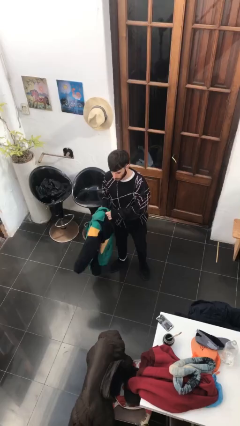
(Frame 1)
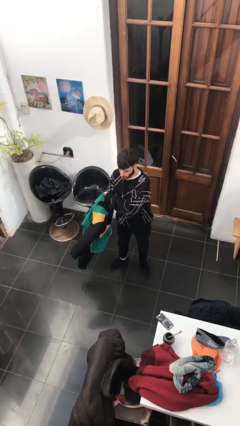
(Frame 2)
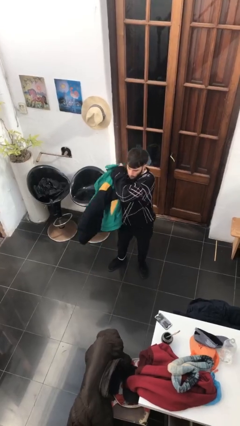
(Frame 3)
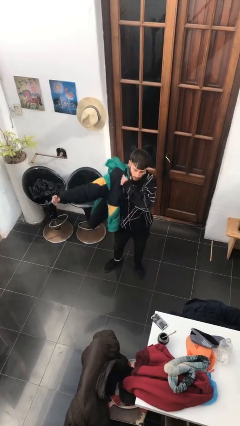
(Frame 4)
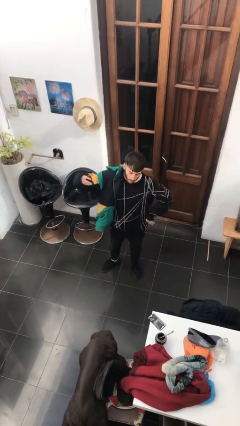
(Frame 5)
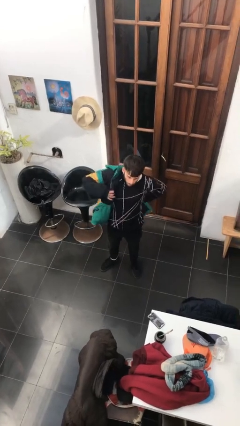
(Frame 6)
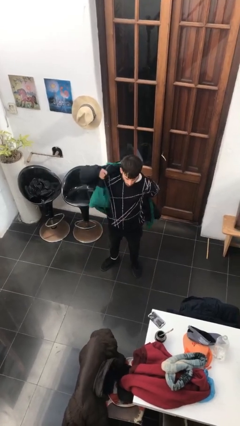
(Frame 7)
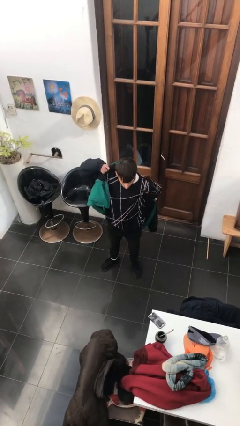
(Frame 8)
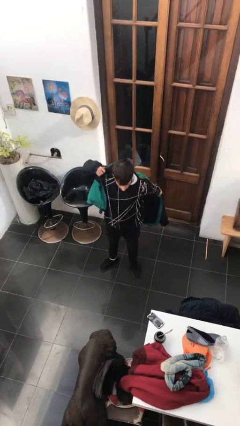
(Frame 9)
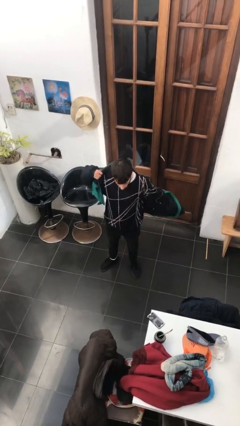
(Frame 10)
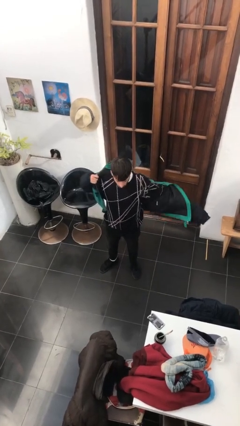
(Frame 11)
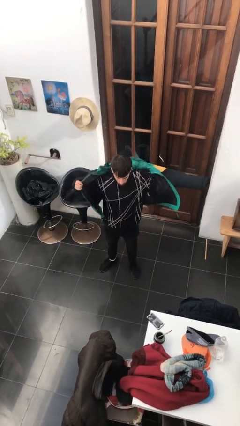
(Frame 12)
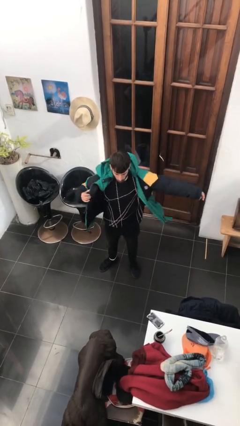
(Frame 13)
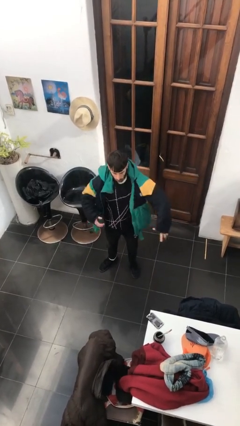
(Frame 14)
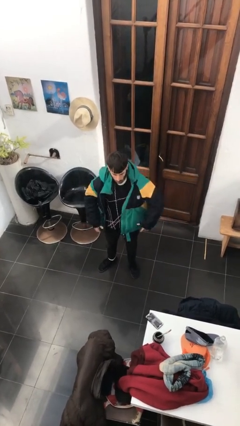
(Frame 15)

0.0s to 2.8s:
person puts on jacket

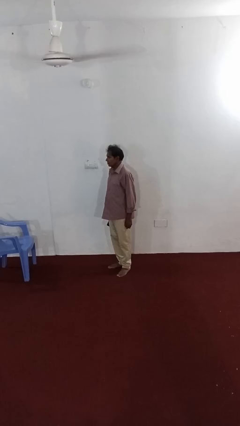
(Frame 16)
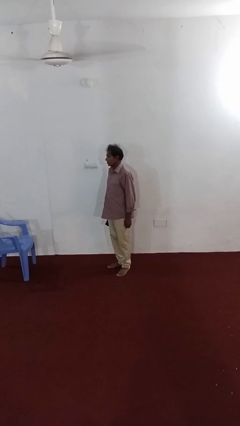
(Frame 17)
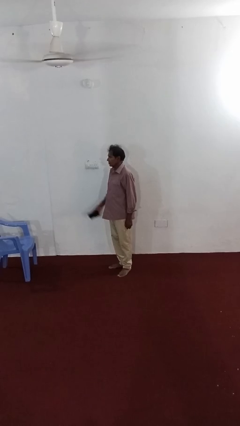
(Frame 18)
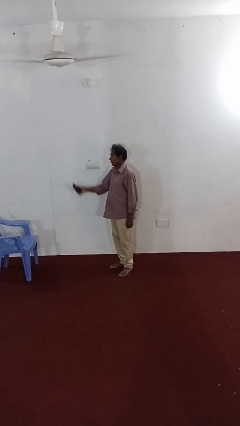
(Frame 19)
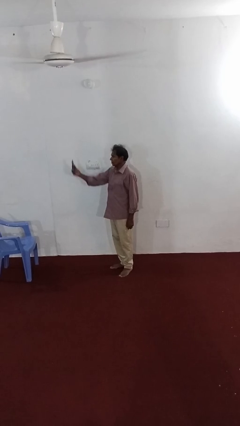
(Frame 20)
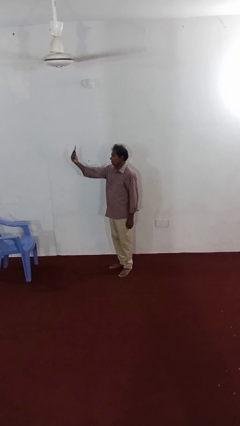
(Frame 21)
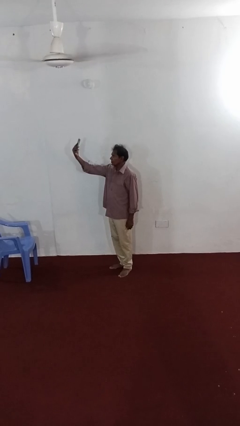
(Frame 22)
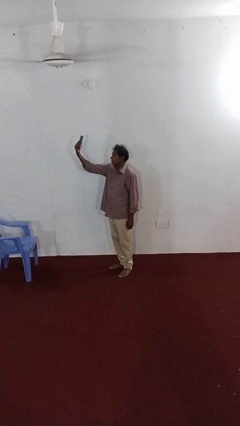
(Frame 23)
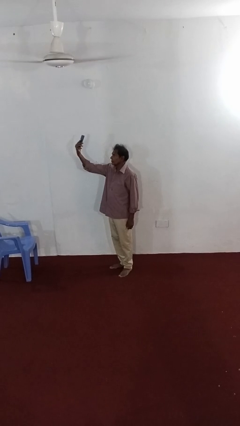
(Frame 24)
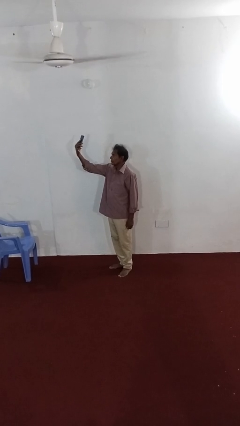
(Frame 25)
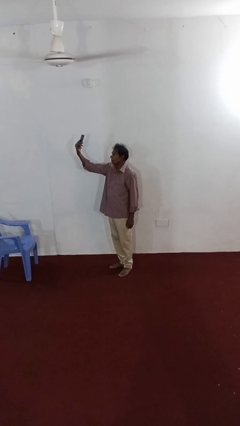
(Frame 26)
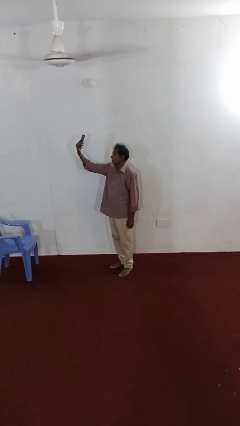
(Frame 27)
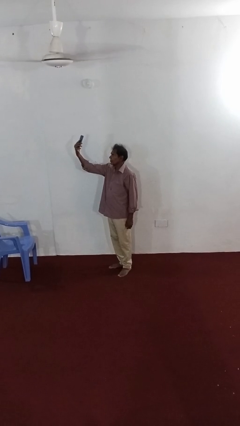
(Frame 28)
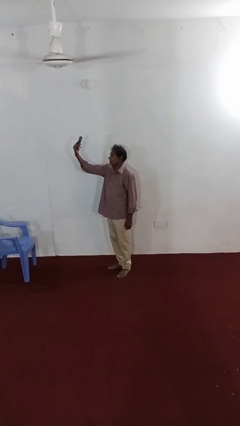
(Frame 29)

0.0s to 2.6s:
person takes selfie

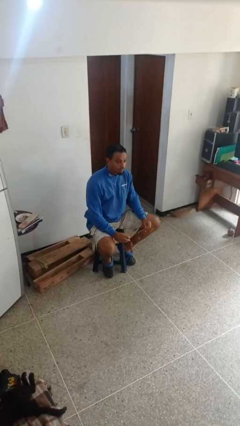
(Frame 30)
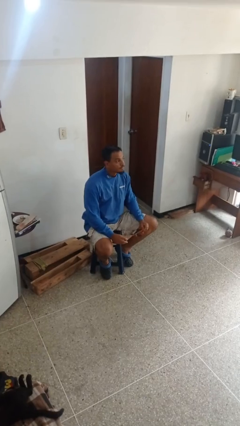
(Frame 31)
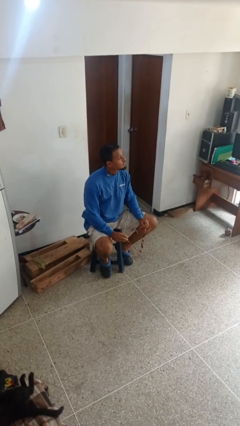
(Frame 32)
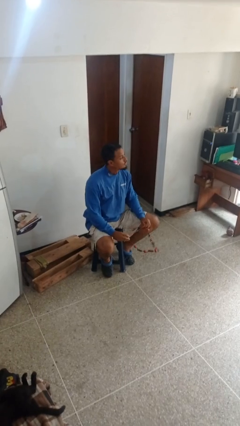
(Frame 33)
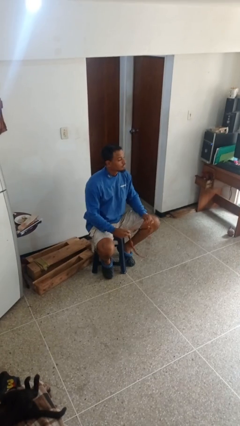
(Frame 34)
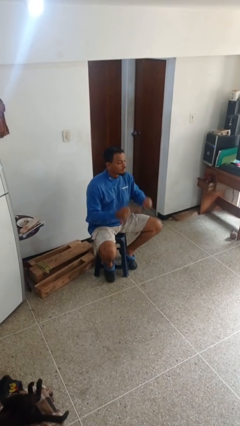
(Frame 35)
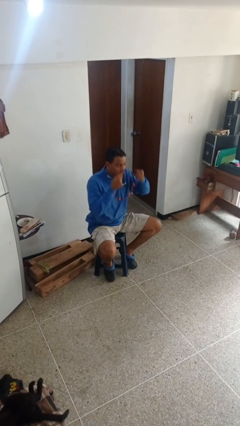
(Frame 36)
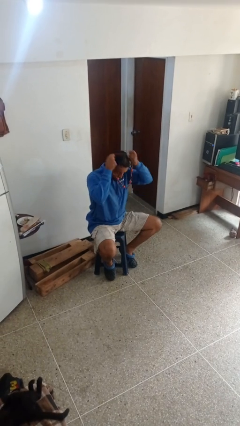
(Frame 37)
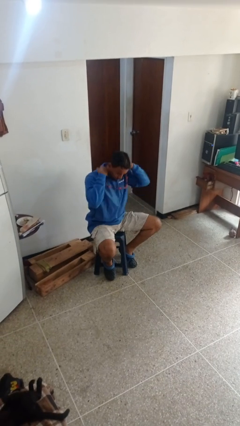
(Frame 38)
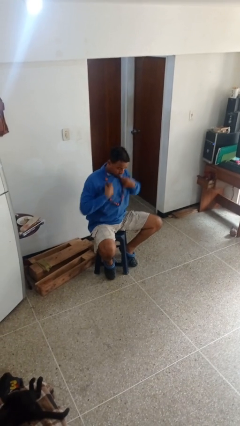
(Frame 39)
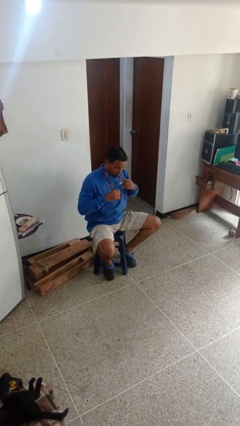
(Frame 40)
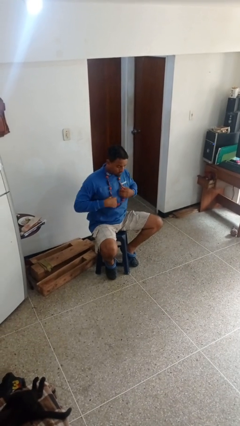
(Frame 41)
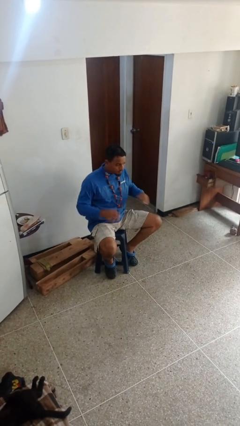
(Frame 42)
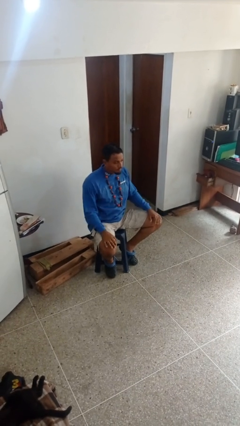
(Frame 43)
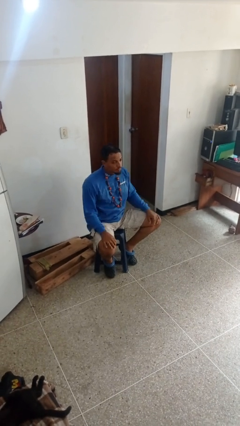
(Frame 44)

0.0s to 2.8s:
person puts on necklace

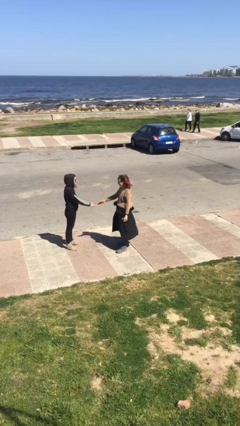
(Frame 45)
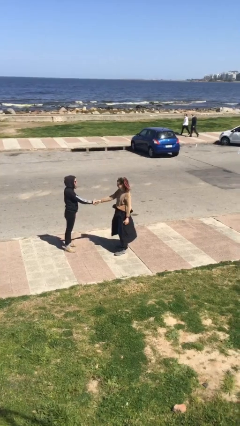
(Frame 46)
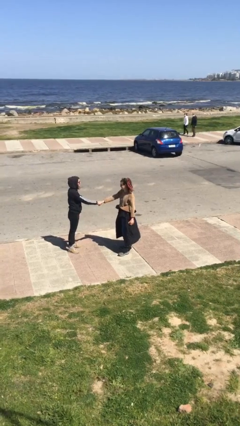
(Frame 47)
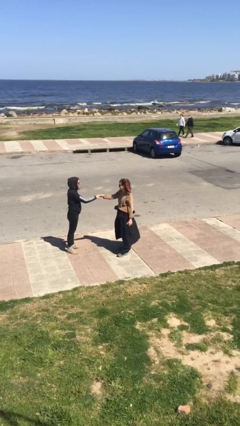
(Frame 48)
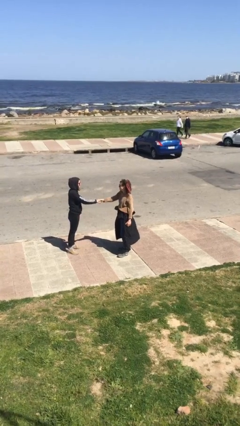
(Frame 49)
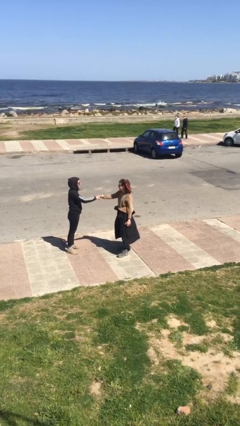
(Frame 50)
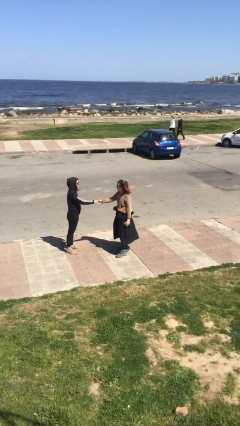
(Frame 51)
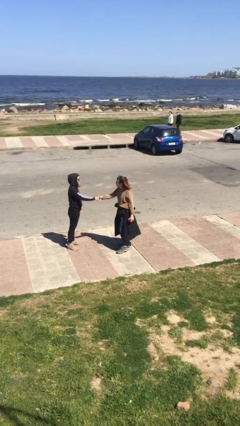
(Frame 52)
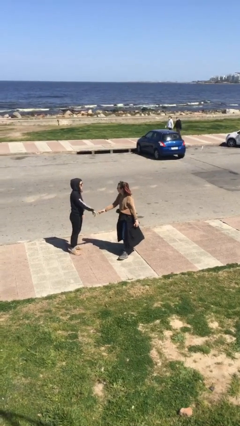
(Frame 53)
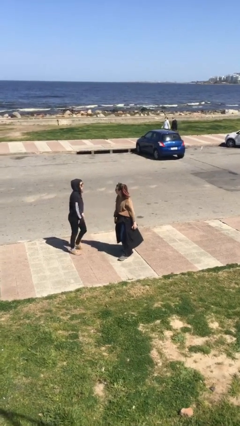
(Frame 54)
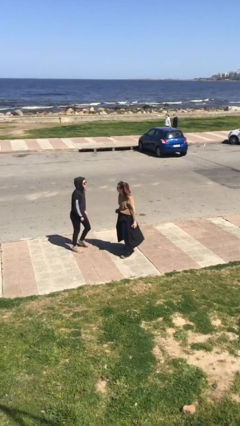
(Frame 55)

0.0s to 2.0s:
person shakes hand

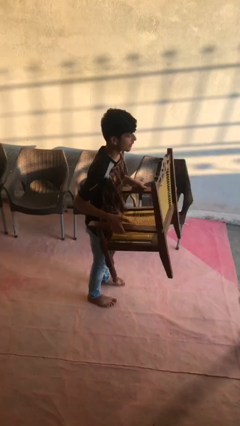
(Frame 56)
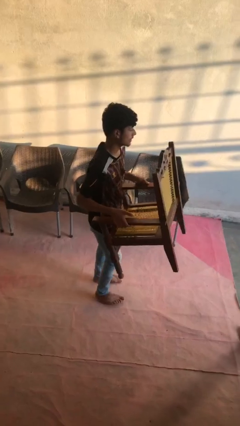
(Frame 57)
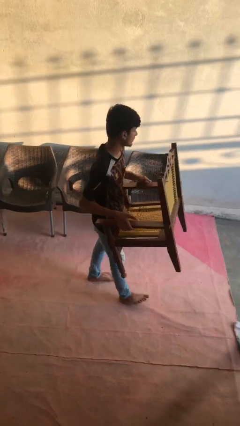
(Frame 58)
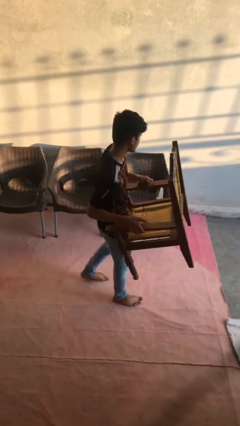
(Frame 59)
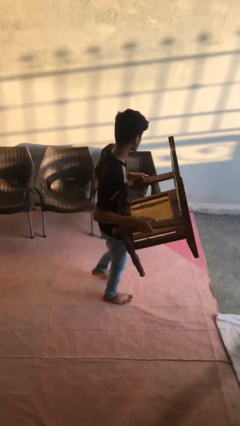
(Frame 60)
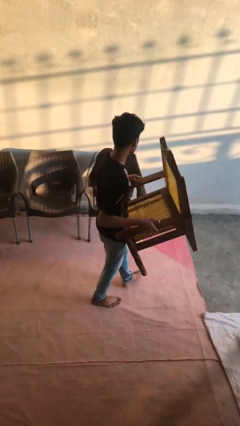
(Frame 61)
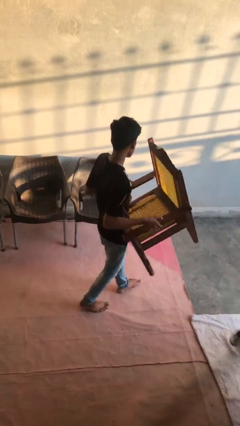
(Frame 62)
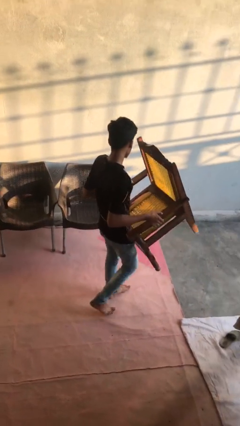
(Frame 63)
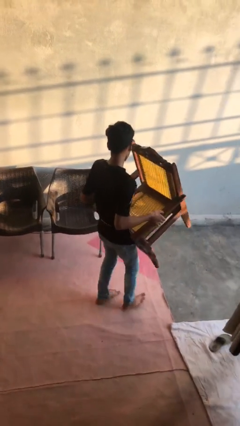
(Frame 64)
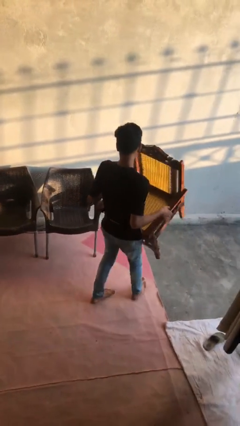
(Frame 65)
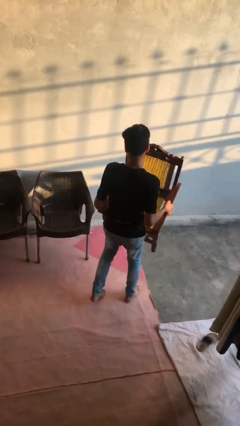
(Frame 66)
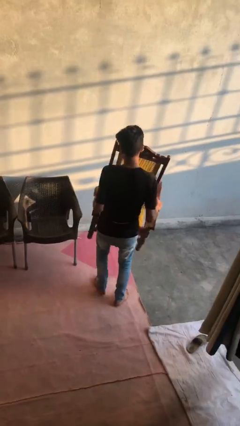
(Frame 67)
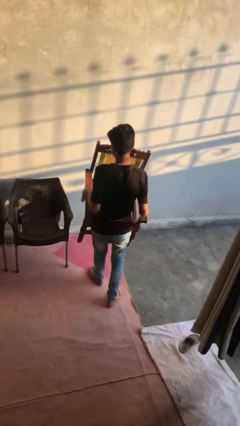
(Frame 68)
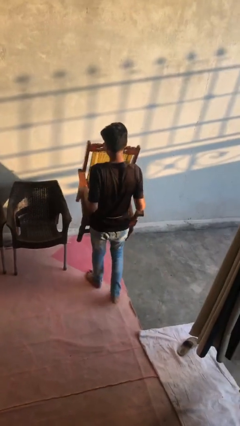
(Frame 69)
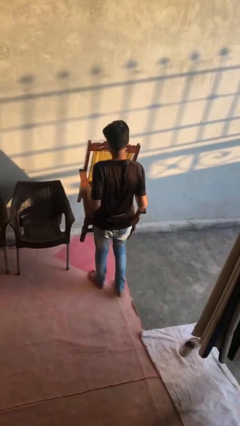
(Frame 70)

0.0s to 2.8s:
person carries heavy object

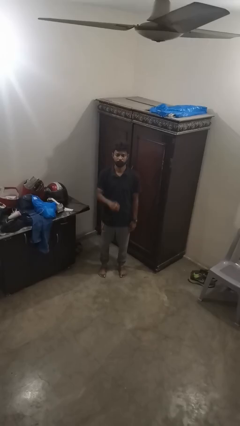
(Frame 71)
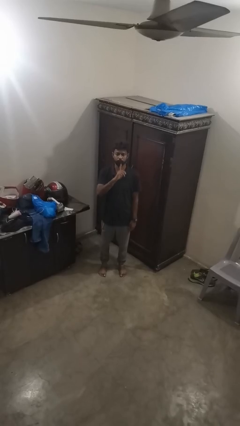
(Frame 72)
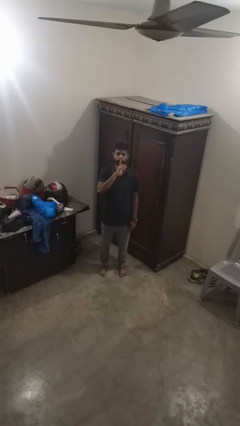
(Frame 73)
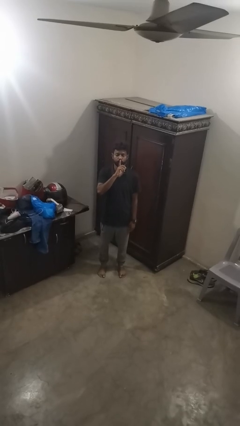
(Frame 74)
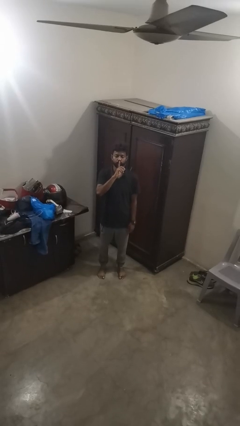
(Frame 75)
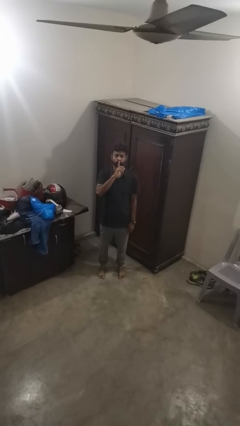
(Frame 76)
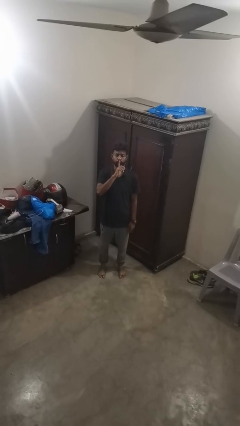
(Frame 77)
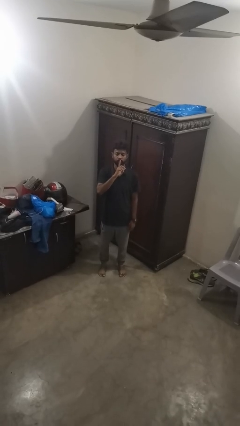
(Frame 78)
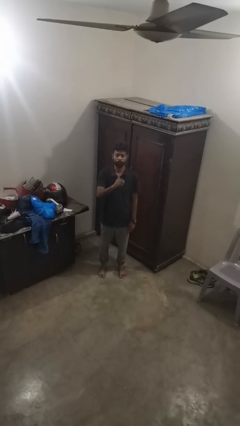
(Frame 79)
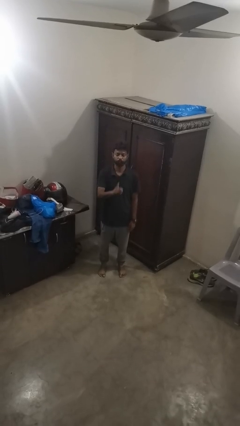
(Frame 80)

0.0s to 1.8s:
person gestures be quiet

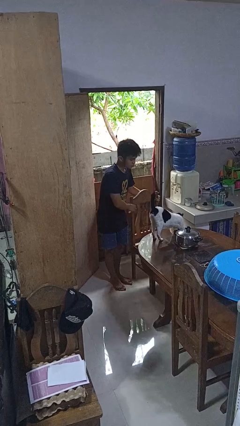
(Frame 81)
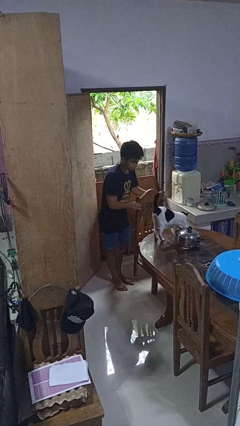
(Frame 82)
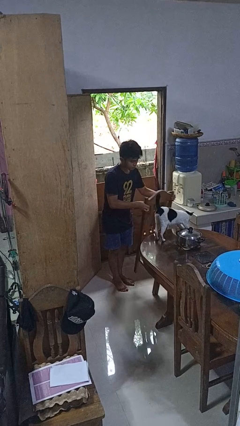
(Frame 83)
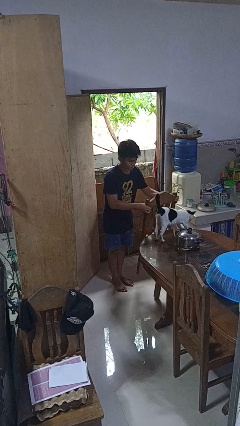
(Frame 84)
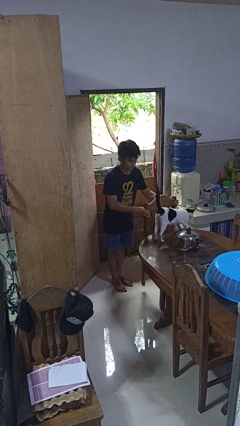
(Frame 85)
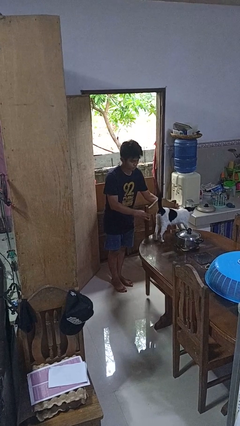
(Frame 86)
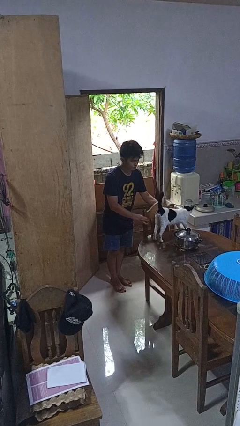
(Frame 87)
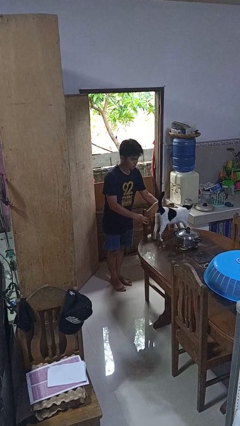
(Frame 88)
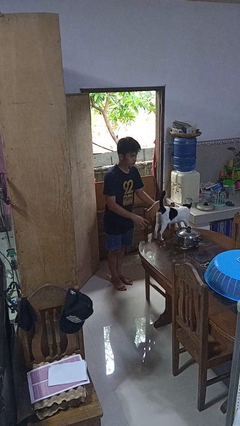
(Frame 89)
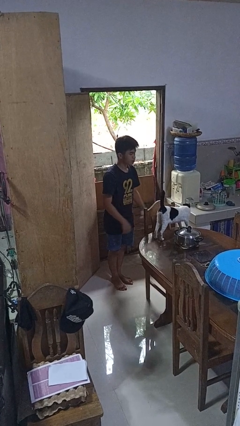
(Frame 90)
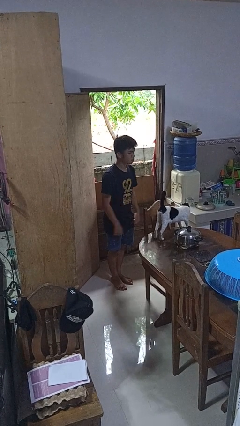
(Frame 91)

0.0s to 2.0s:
person pushes in chair

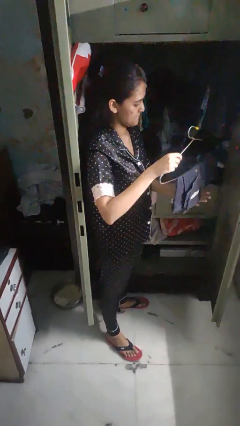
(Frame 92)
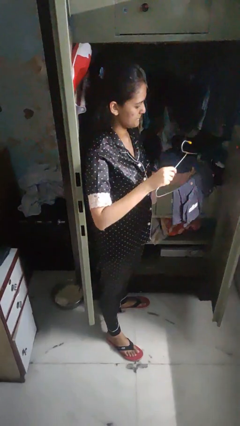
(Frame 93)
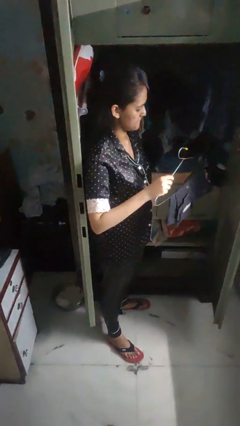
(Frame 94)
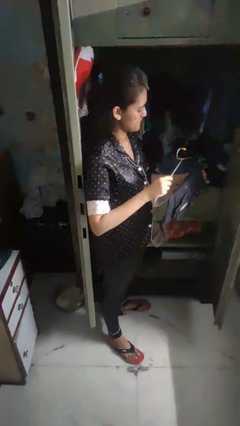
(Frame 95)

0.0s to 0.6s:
person takes clothes from closet
